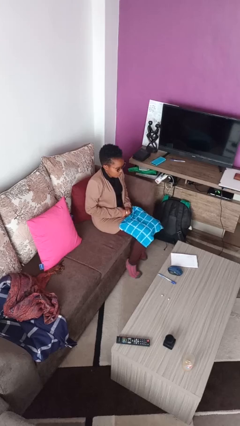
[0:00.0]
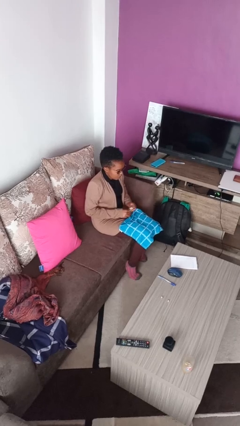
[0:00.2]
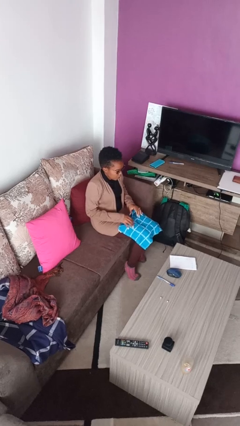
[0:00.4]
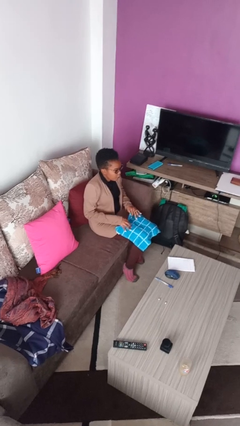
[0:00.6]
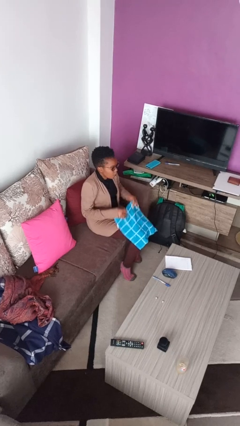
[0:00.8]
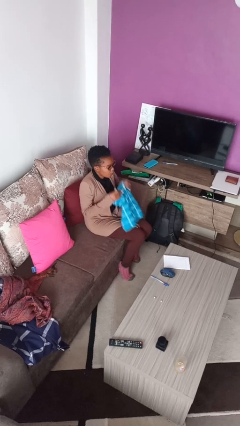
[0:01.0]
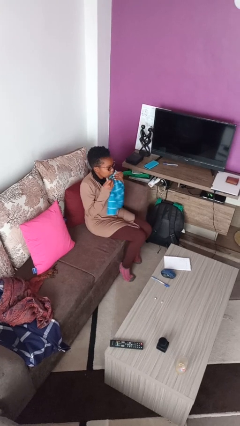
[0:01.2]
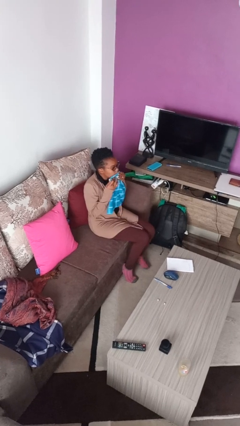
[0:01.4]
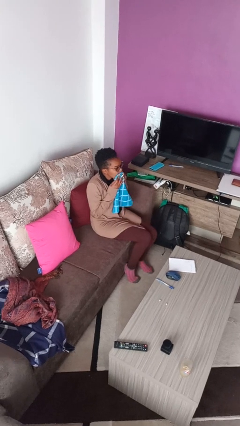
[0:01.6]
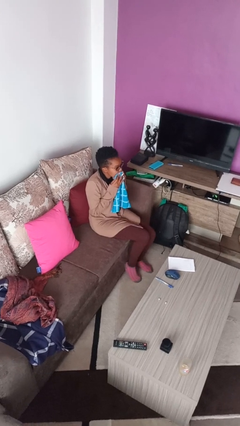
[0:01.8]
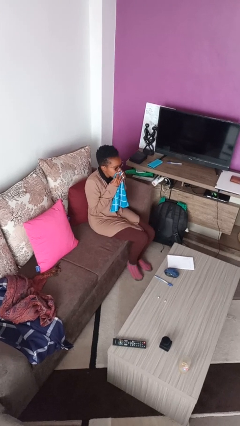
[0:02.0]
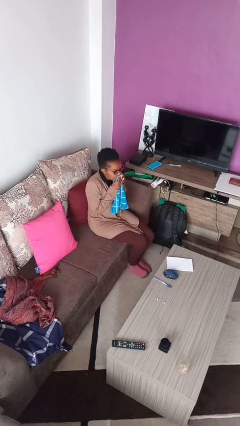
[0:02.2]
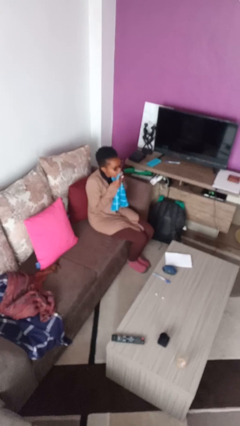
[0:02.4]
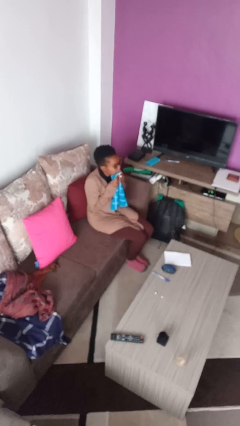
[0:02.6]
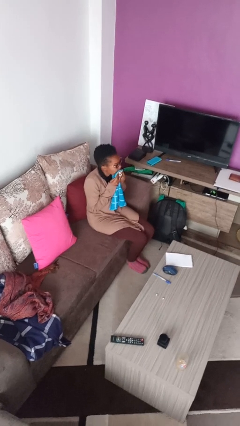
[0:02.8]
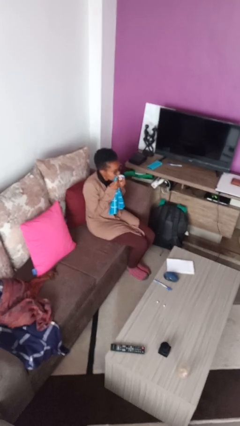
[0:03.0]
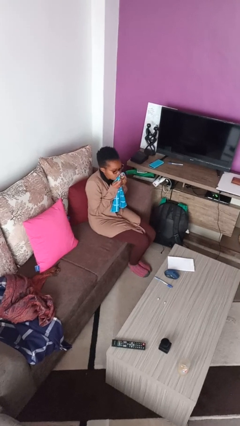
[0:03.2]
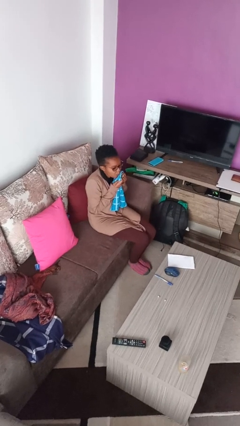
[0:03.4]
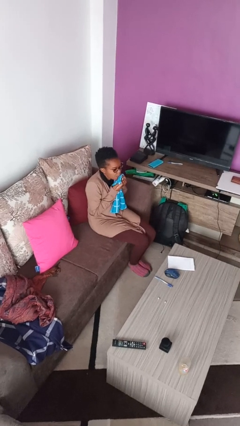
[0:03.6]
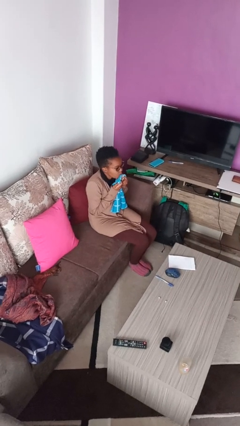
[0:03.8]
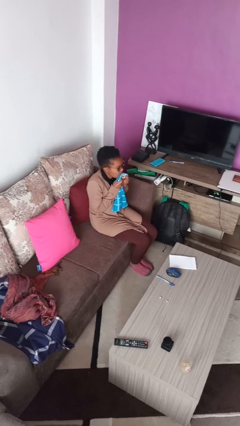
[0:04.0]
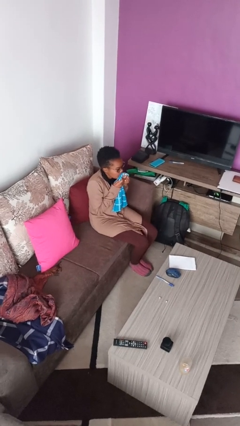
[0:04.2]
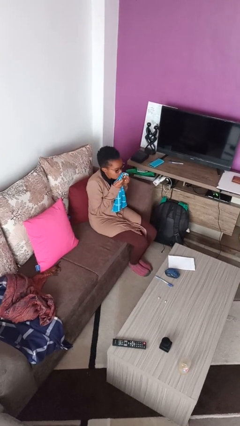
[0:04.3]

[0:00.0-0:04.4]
person wipes mouth with napkin

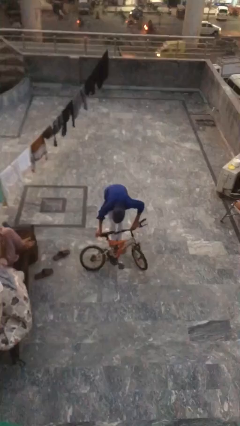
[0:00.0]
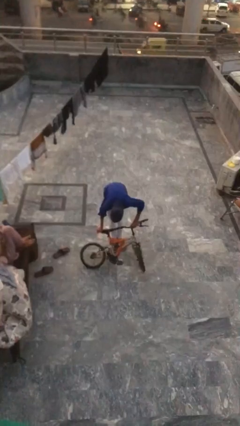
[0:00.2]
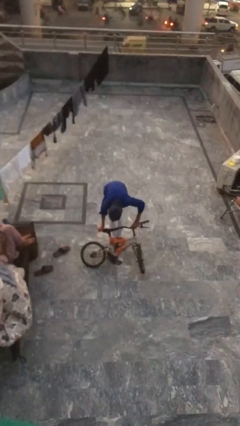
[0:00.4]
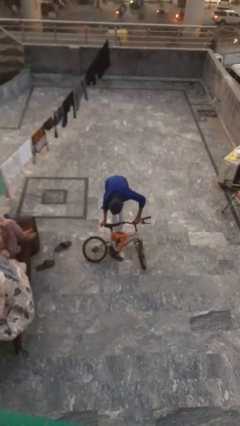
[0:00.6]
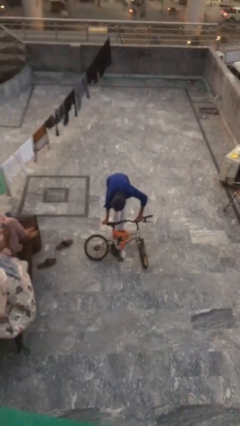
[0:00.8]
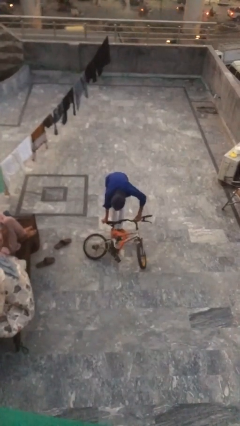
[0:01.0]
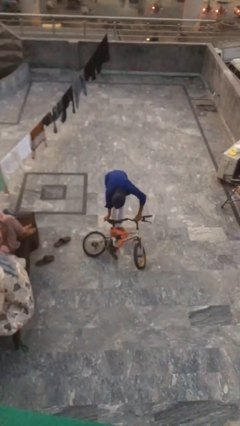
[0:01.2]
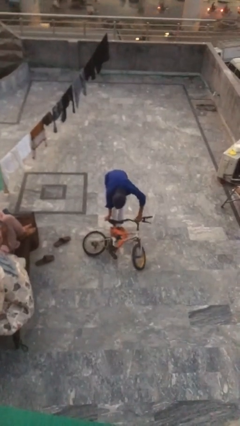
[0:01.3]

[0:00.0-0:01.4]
person puts down object on floor

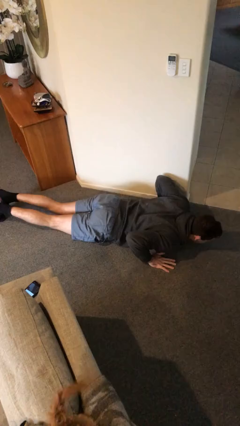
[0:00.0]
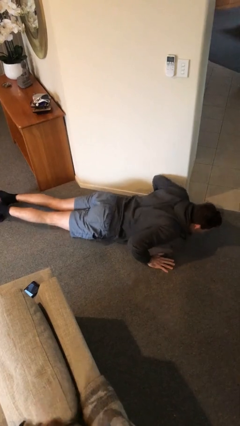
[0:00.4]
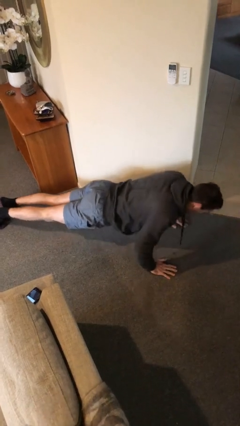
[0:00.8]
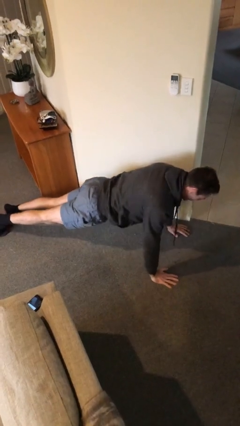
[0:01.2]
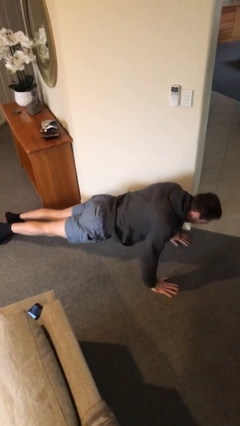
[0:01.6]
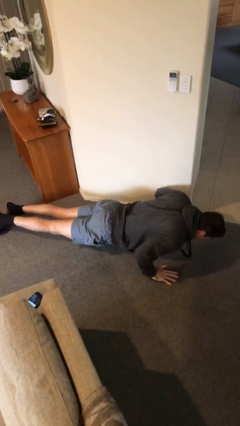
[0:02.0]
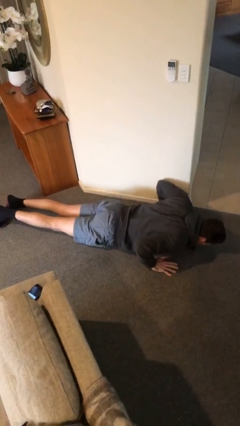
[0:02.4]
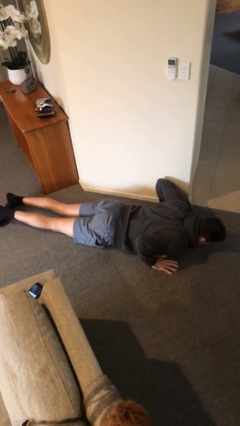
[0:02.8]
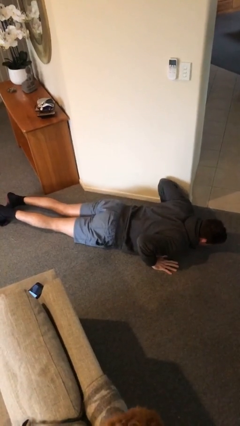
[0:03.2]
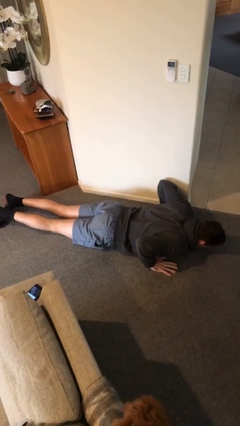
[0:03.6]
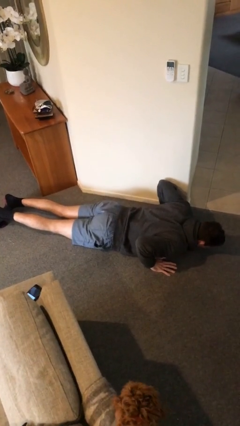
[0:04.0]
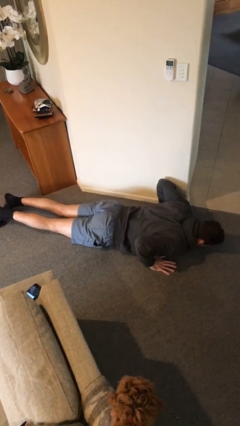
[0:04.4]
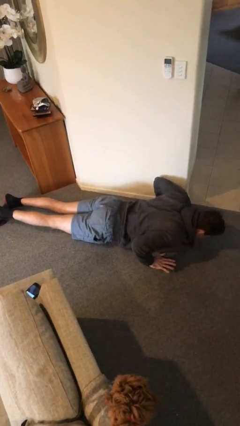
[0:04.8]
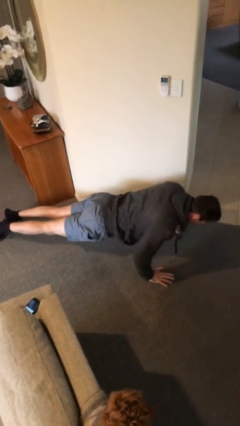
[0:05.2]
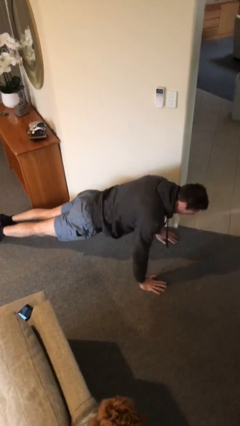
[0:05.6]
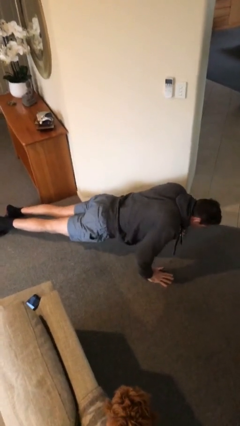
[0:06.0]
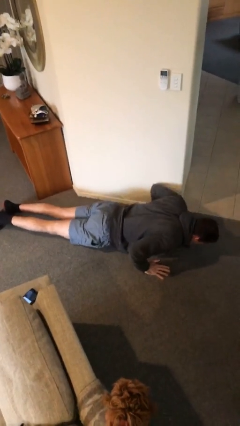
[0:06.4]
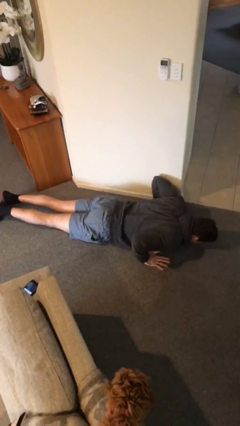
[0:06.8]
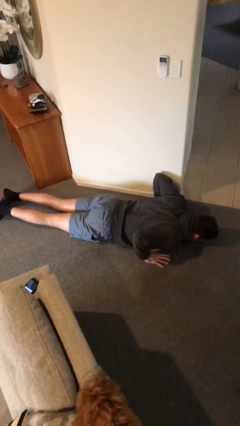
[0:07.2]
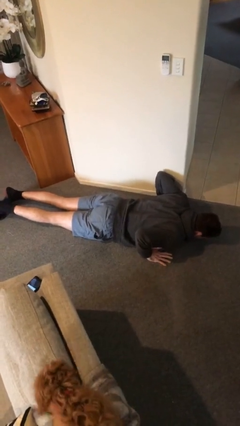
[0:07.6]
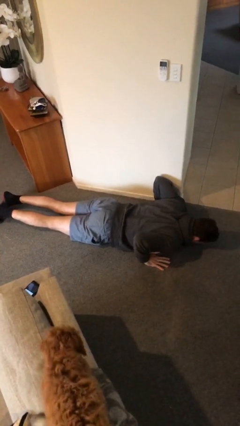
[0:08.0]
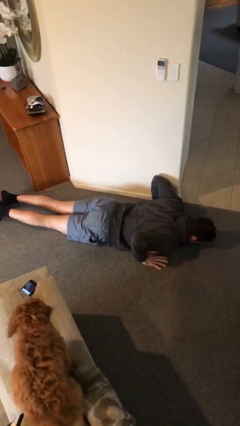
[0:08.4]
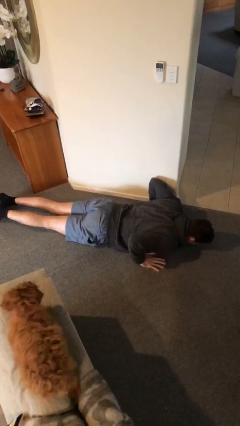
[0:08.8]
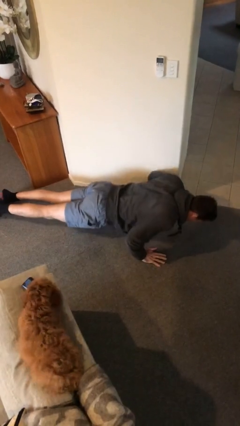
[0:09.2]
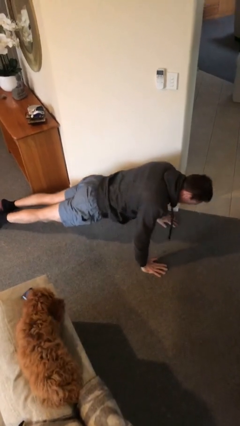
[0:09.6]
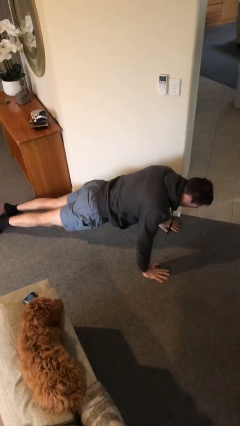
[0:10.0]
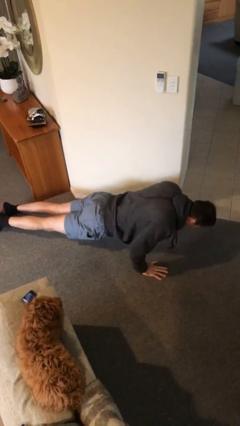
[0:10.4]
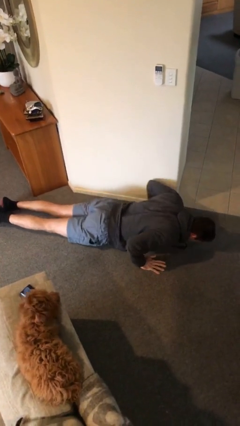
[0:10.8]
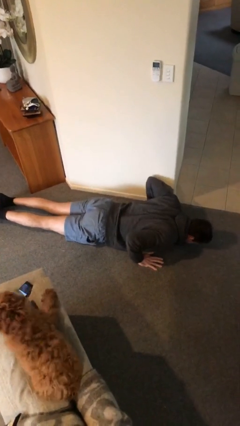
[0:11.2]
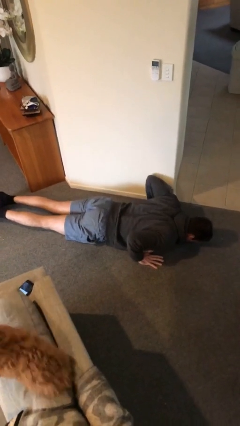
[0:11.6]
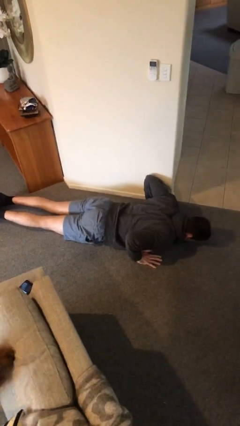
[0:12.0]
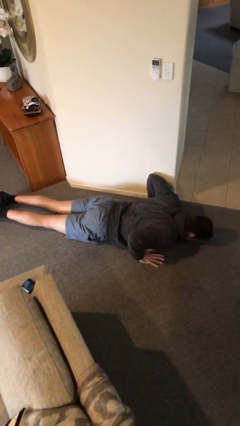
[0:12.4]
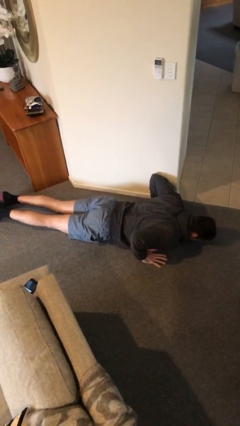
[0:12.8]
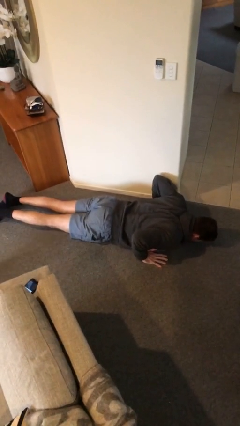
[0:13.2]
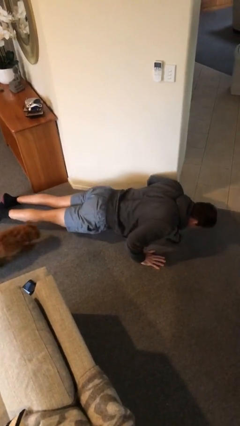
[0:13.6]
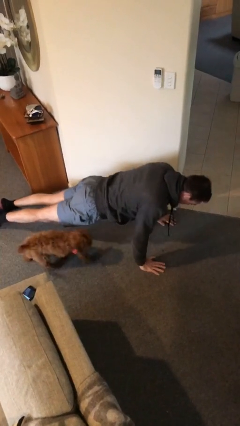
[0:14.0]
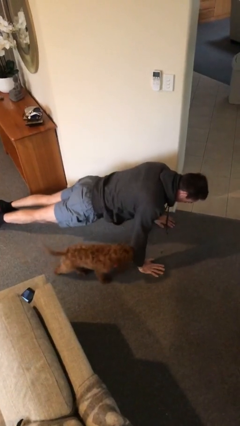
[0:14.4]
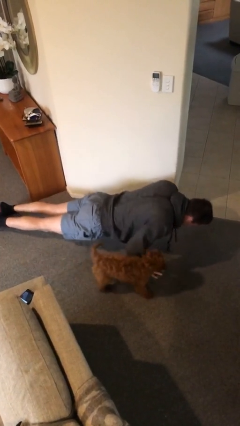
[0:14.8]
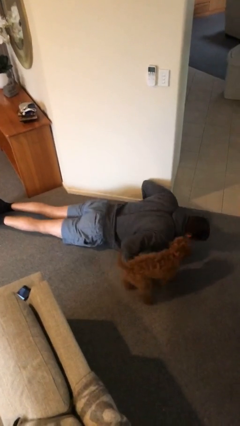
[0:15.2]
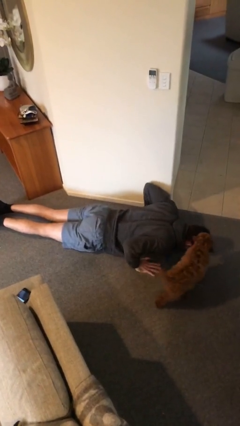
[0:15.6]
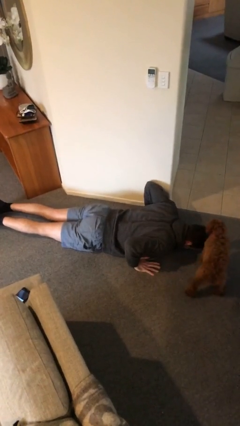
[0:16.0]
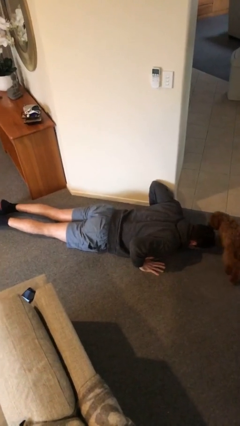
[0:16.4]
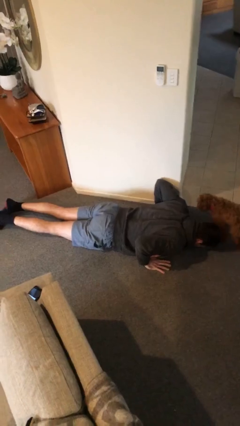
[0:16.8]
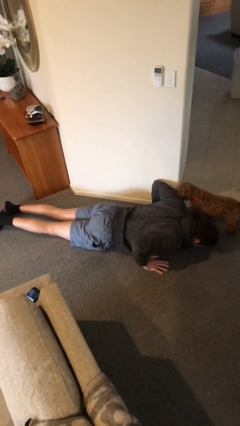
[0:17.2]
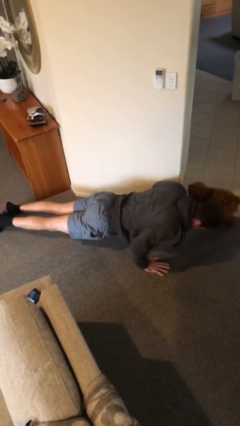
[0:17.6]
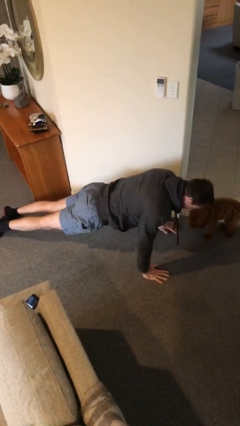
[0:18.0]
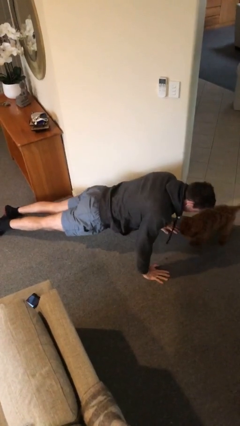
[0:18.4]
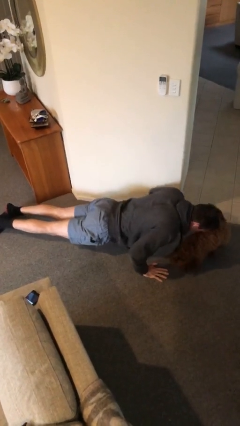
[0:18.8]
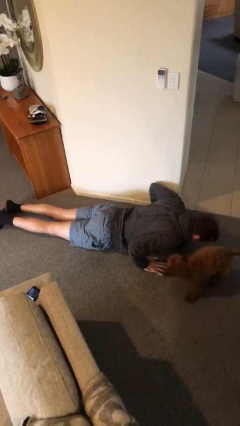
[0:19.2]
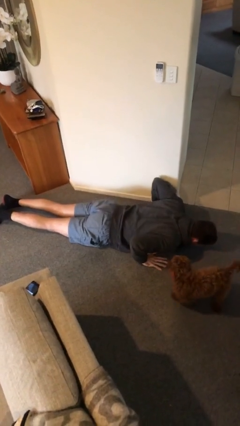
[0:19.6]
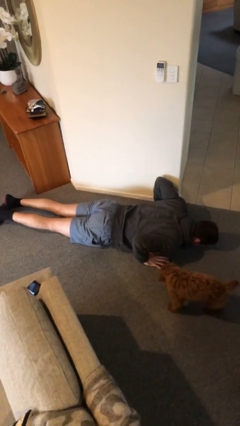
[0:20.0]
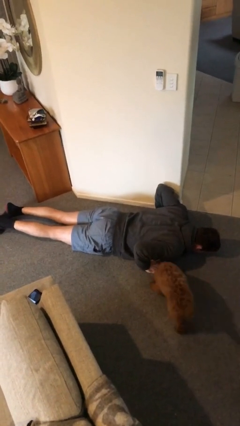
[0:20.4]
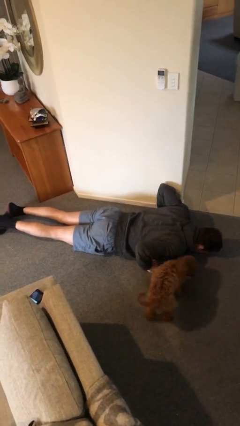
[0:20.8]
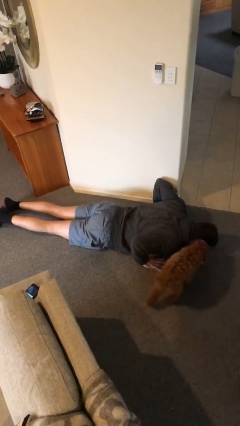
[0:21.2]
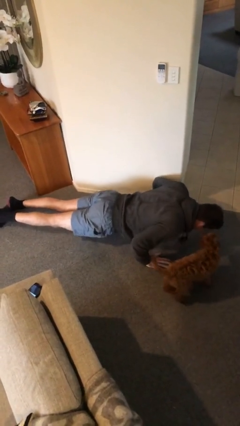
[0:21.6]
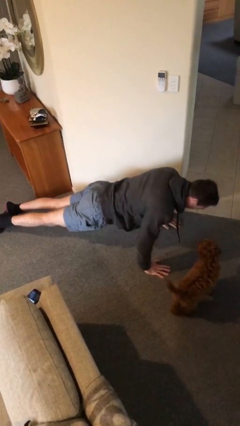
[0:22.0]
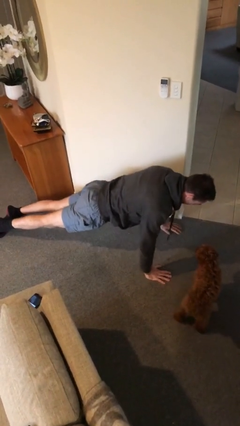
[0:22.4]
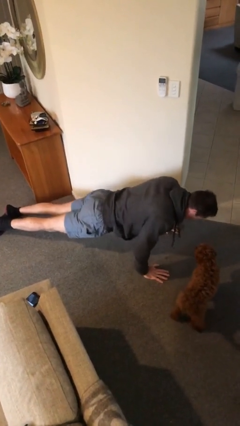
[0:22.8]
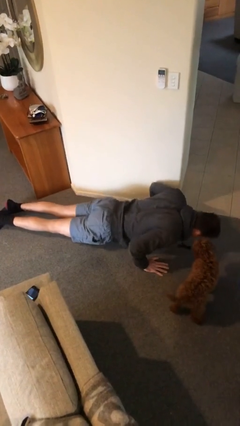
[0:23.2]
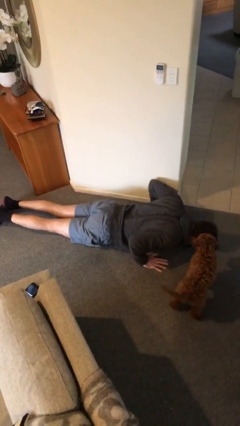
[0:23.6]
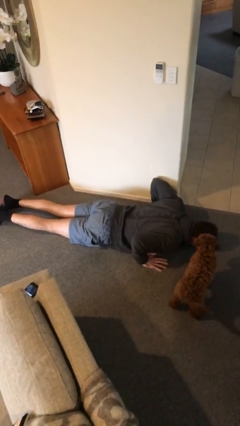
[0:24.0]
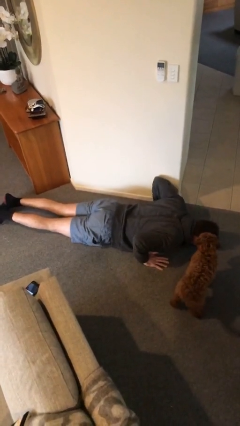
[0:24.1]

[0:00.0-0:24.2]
person exercises with pushup
